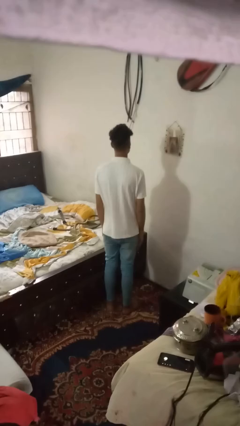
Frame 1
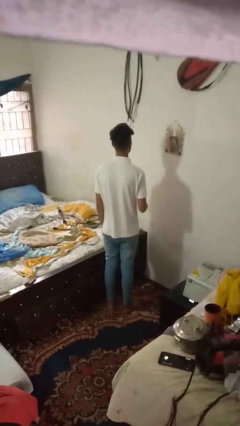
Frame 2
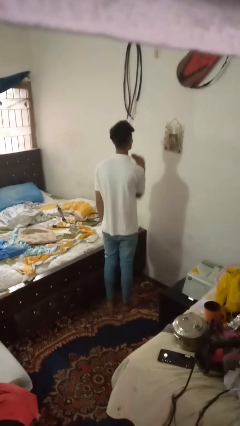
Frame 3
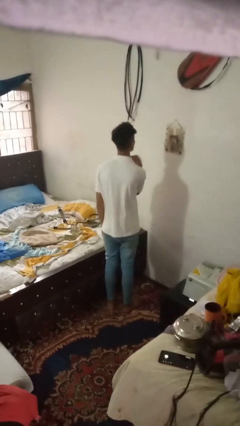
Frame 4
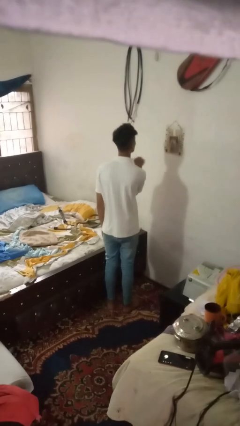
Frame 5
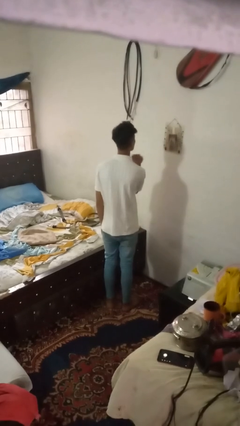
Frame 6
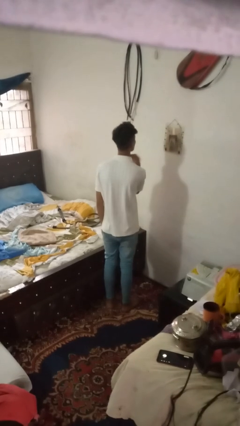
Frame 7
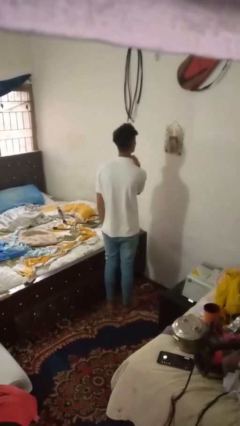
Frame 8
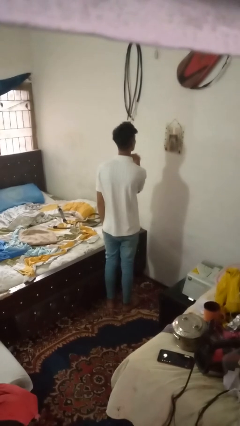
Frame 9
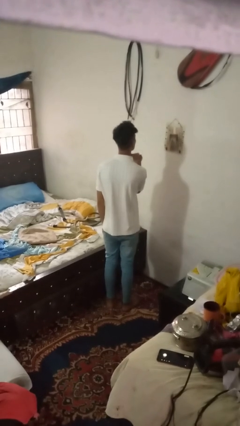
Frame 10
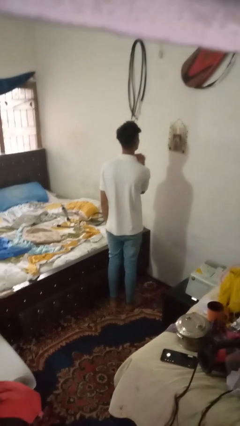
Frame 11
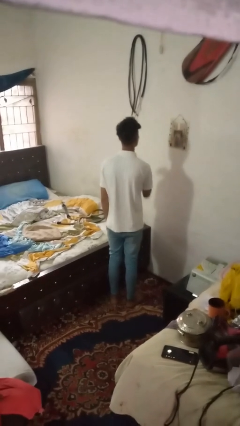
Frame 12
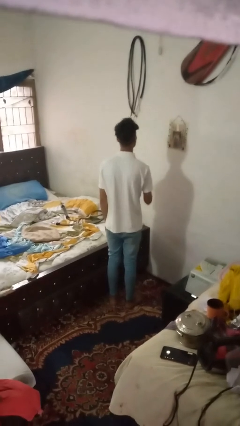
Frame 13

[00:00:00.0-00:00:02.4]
person gestures cut

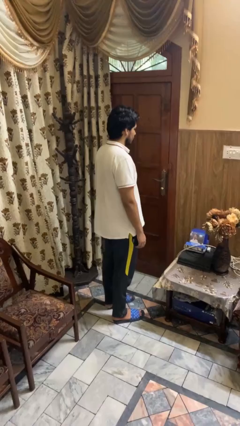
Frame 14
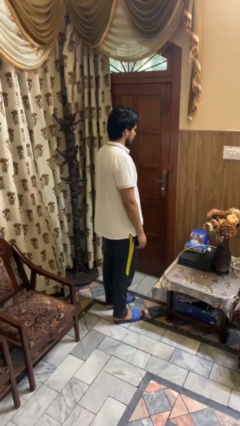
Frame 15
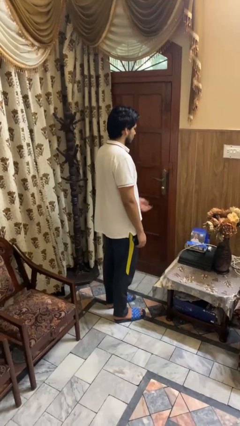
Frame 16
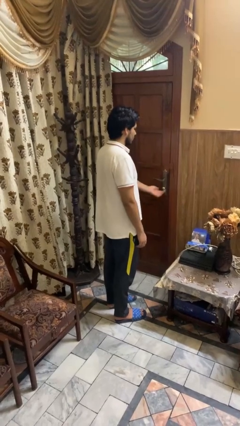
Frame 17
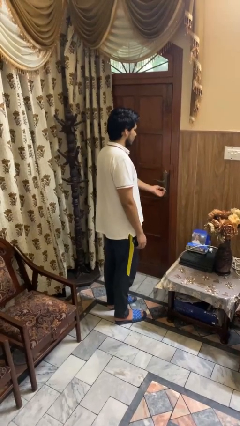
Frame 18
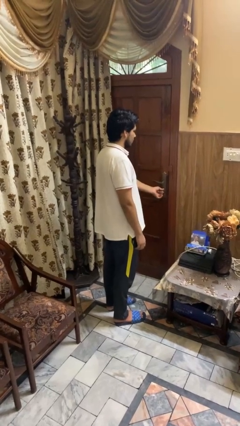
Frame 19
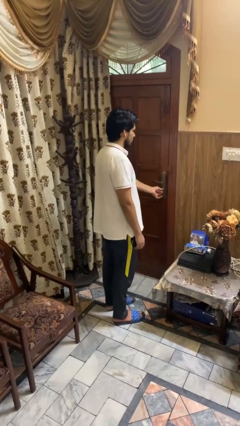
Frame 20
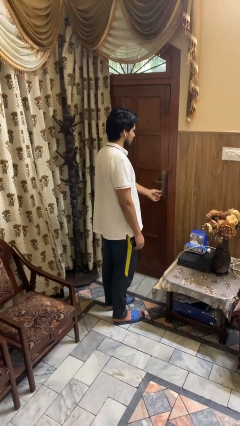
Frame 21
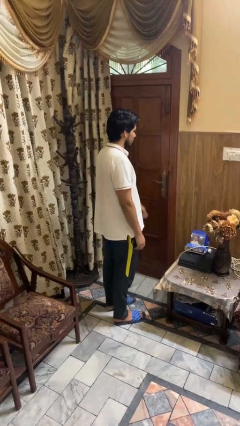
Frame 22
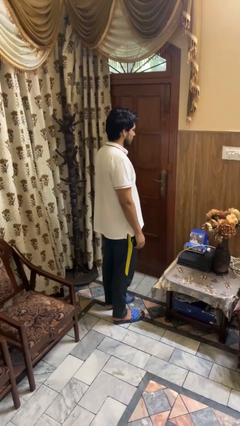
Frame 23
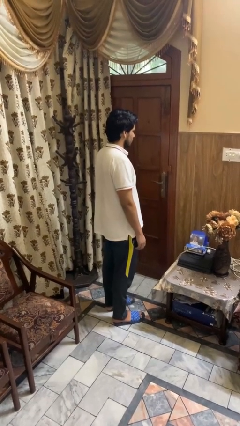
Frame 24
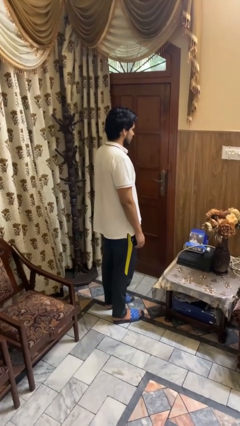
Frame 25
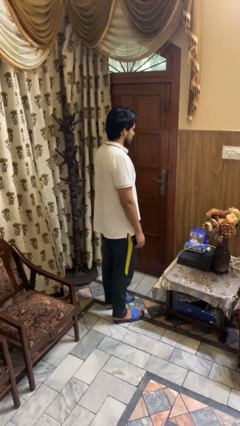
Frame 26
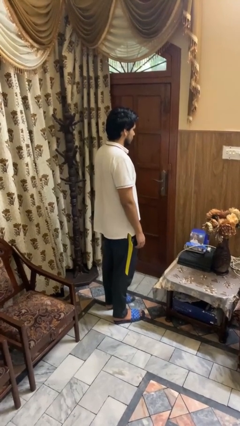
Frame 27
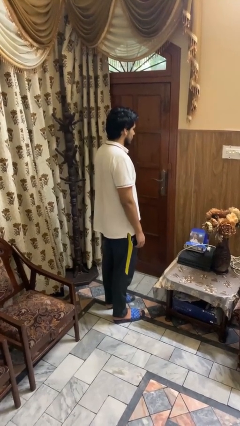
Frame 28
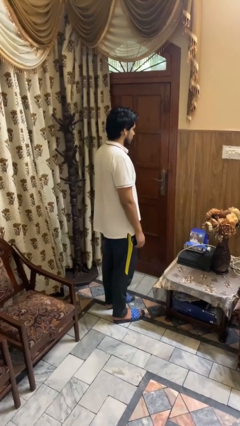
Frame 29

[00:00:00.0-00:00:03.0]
person locks door with keys

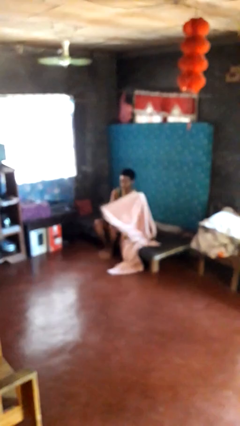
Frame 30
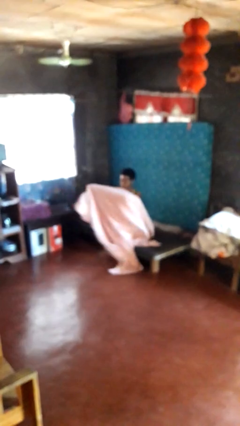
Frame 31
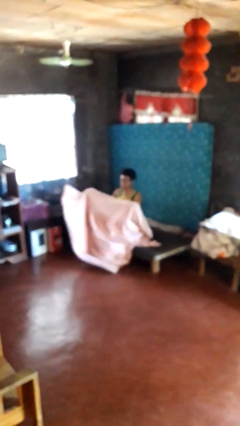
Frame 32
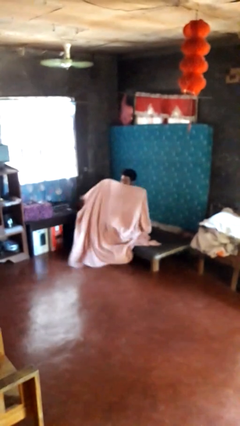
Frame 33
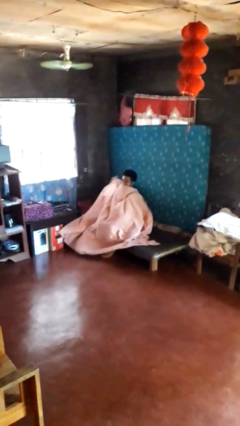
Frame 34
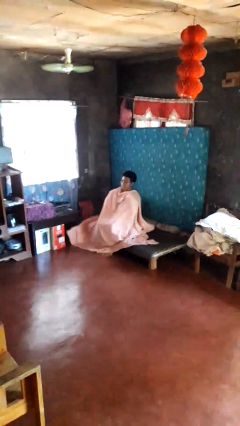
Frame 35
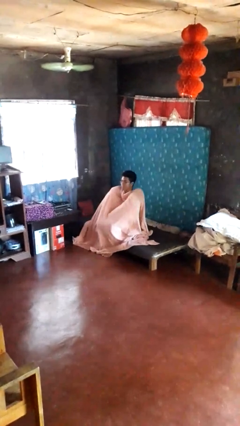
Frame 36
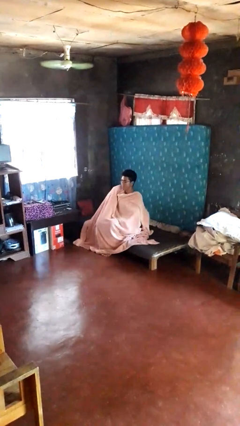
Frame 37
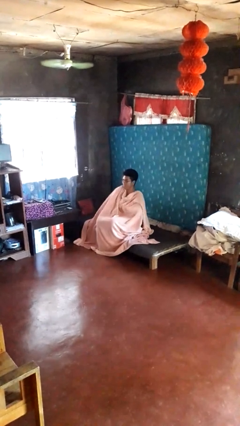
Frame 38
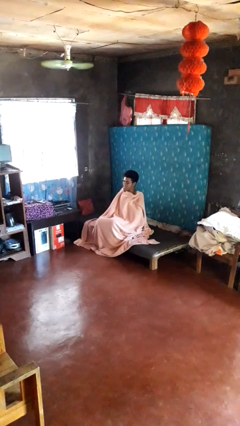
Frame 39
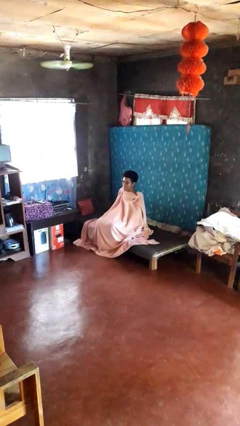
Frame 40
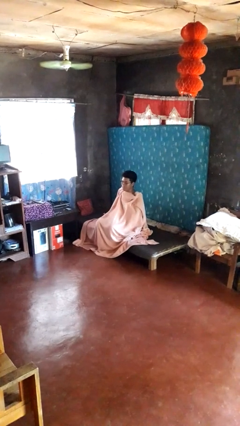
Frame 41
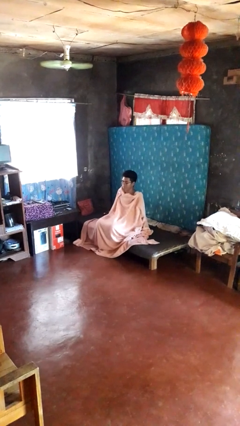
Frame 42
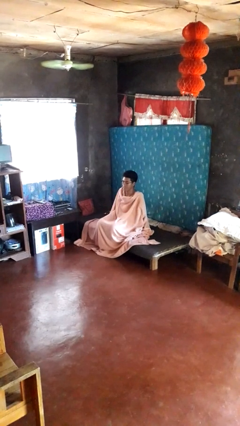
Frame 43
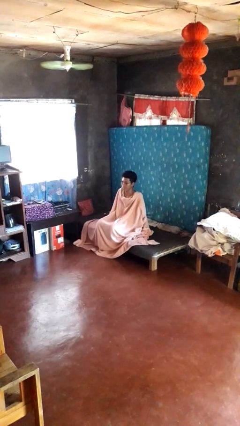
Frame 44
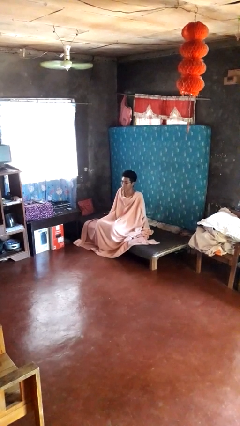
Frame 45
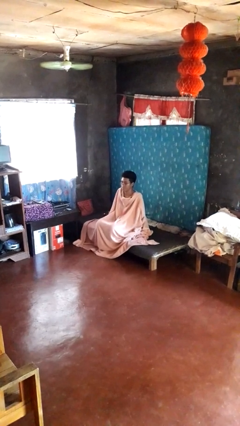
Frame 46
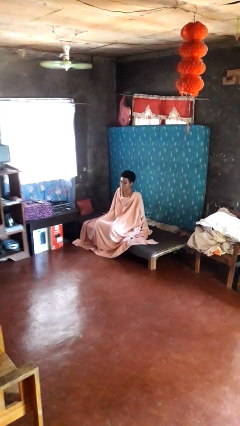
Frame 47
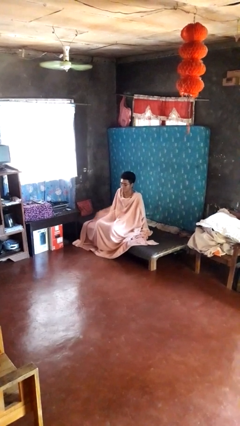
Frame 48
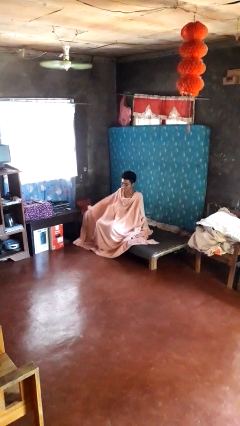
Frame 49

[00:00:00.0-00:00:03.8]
person covers with blanket

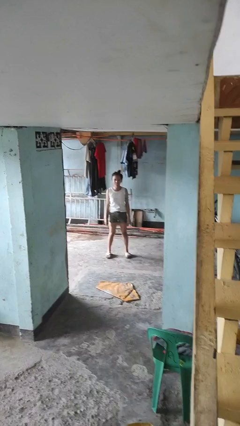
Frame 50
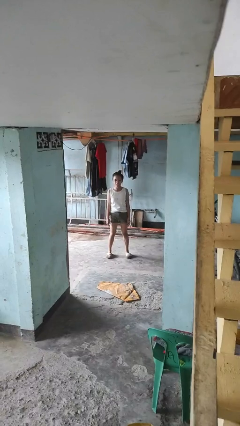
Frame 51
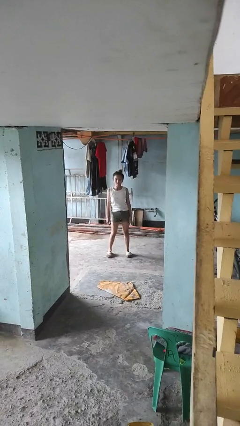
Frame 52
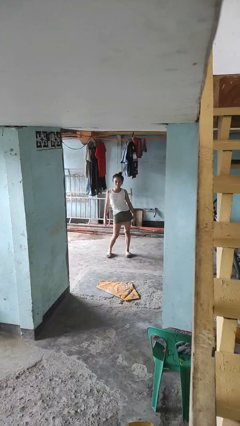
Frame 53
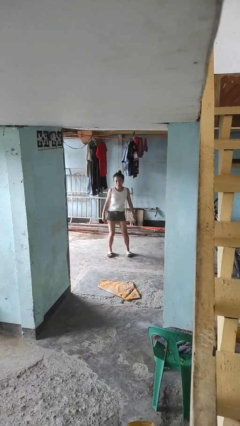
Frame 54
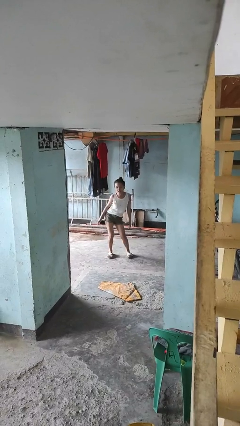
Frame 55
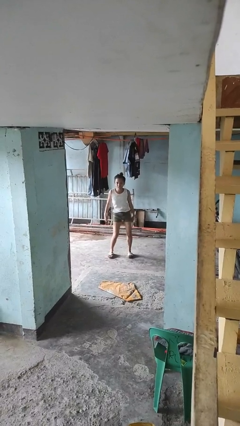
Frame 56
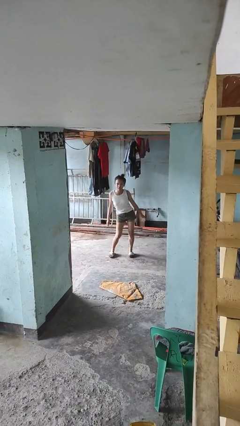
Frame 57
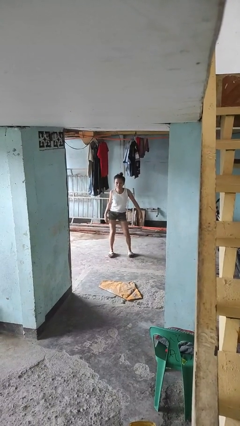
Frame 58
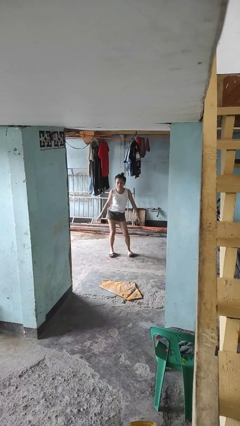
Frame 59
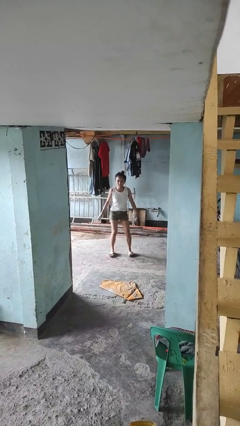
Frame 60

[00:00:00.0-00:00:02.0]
person wiggles hips

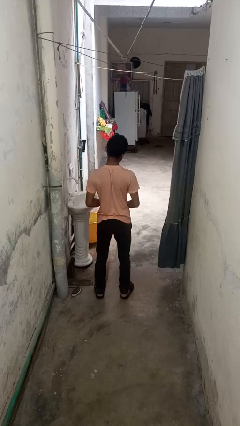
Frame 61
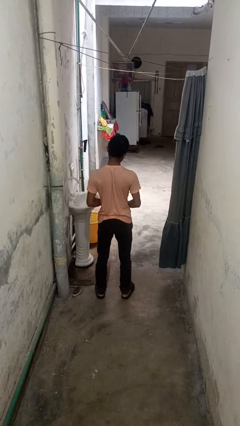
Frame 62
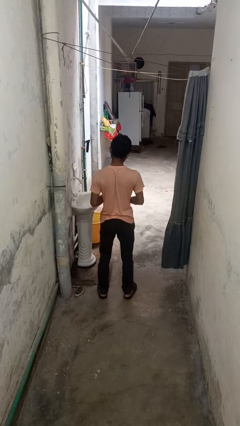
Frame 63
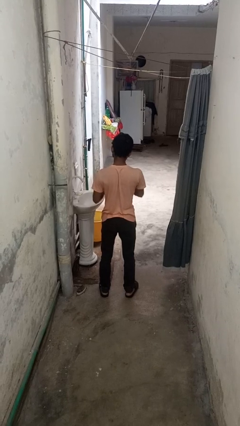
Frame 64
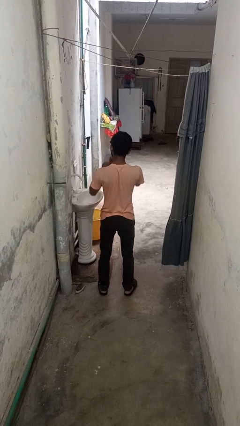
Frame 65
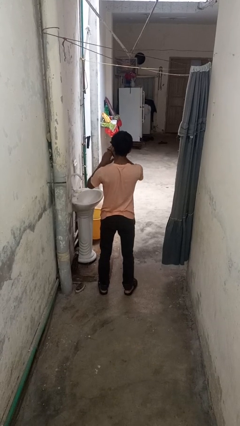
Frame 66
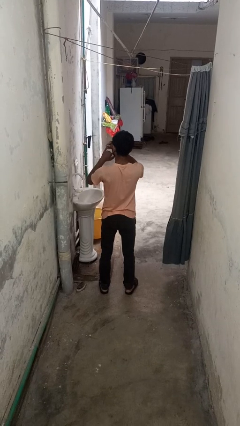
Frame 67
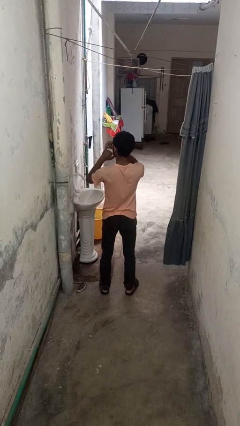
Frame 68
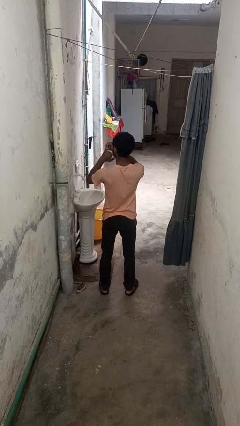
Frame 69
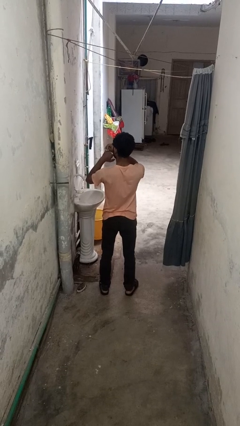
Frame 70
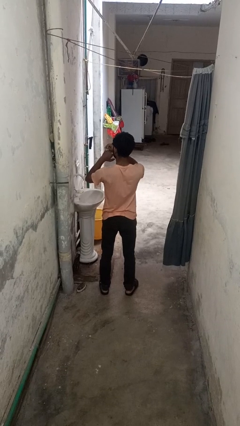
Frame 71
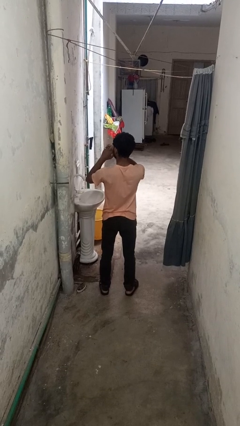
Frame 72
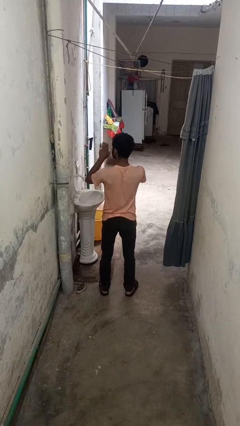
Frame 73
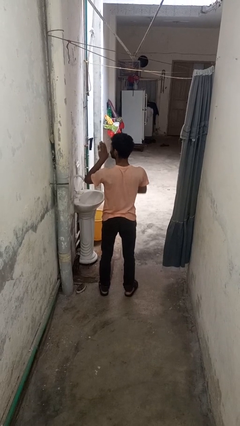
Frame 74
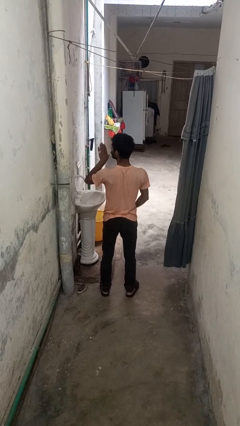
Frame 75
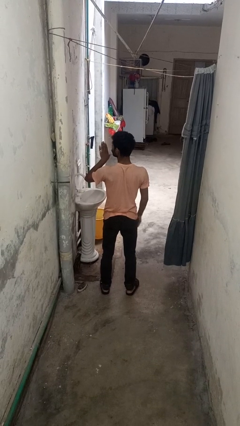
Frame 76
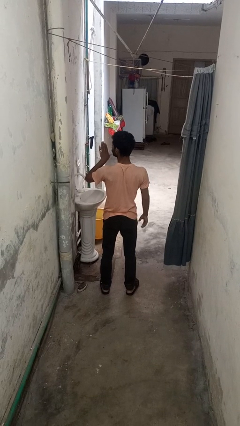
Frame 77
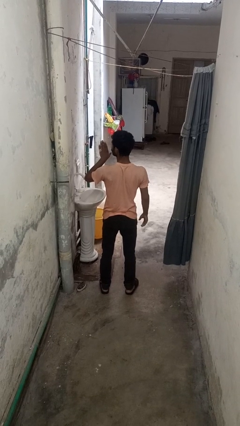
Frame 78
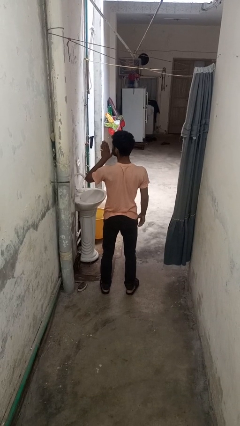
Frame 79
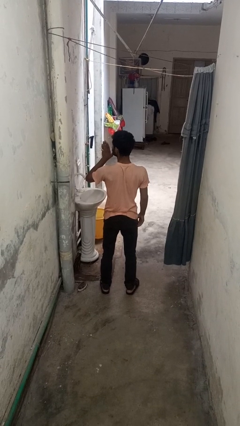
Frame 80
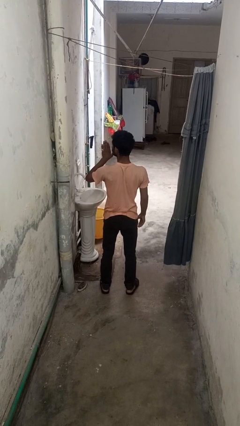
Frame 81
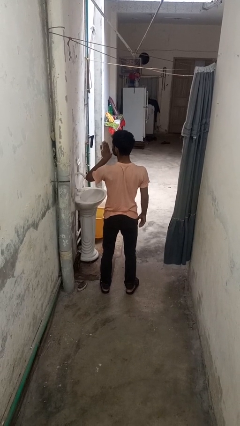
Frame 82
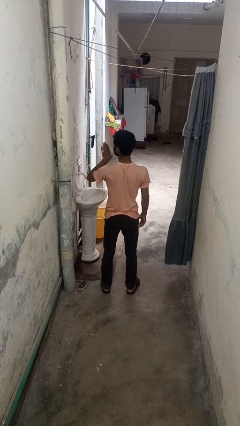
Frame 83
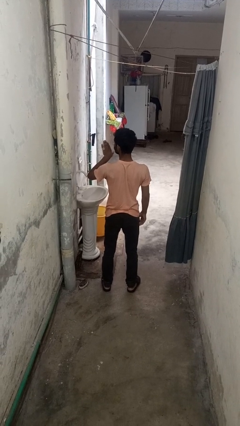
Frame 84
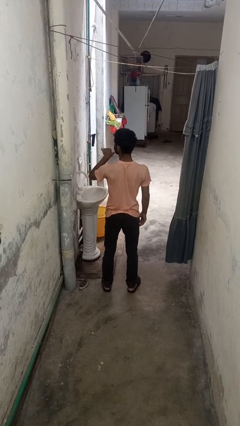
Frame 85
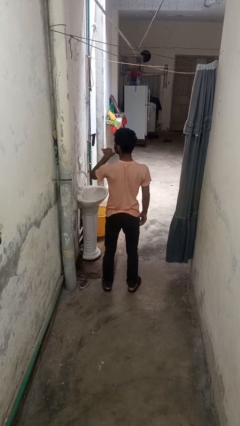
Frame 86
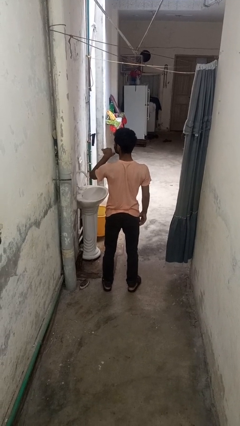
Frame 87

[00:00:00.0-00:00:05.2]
person puts on ring

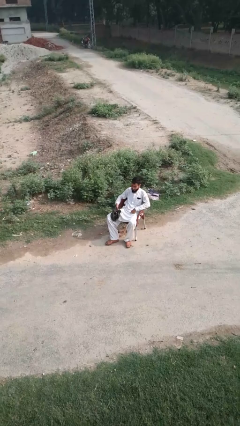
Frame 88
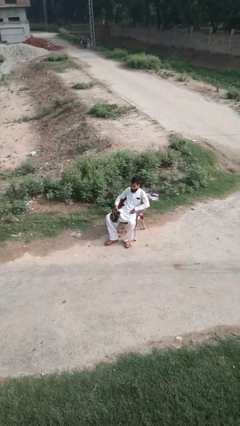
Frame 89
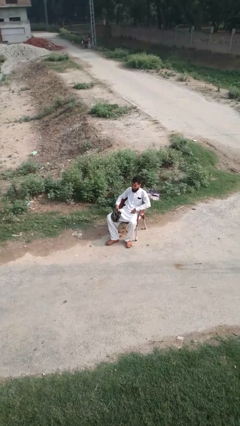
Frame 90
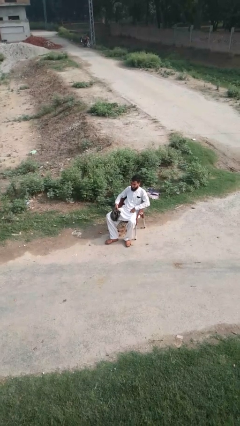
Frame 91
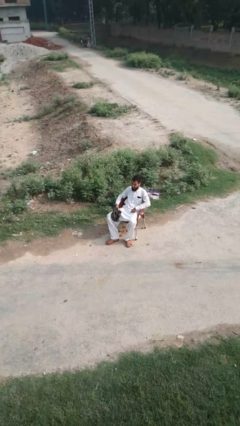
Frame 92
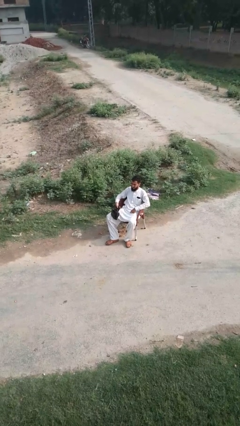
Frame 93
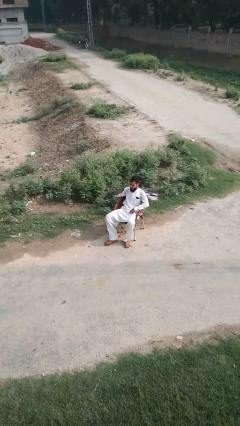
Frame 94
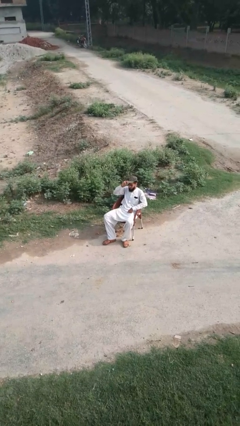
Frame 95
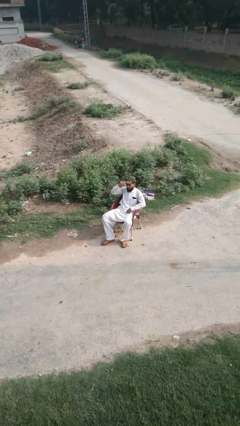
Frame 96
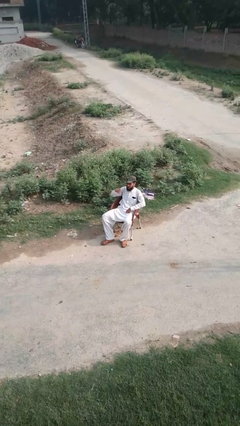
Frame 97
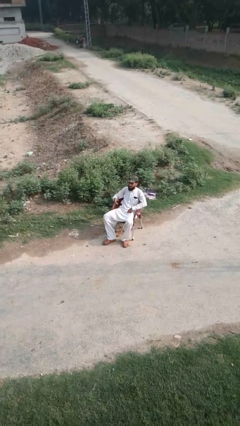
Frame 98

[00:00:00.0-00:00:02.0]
person puts on hat
